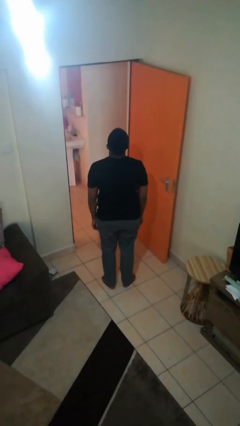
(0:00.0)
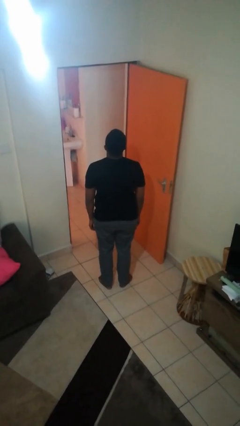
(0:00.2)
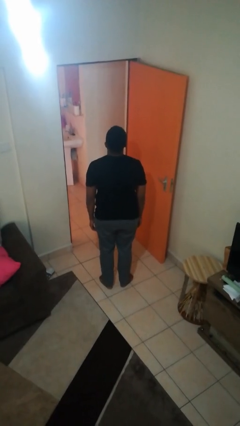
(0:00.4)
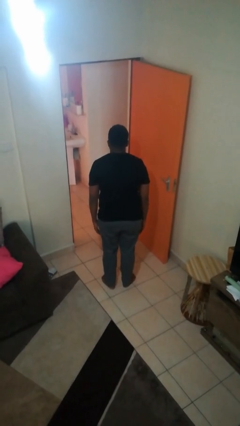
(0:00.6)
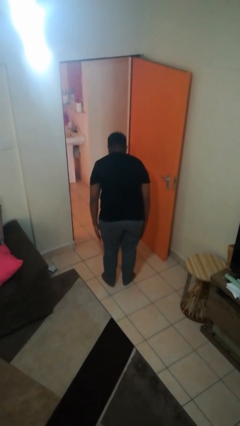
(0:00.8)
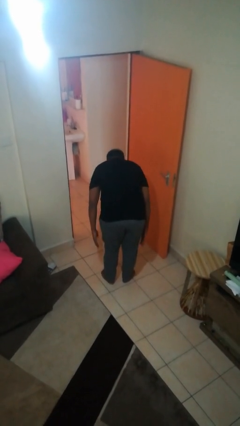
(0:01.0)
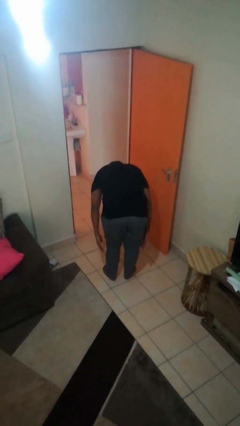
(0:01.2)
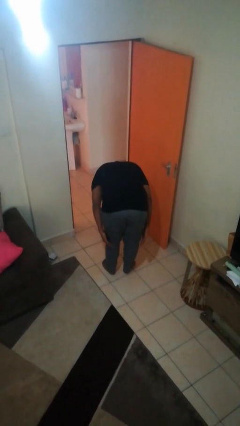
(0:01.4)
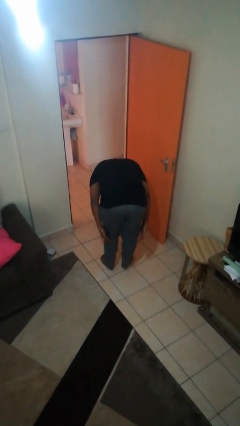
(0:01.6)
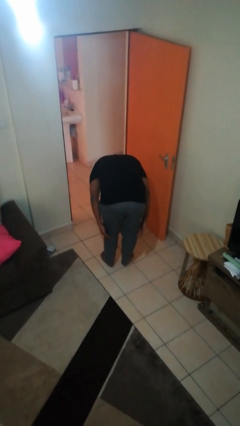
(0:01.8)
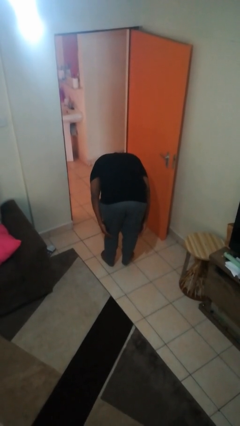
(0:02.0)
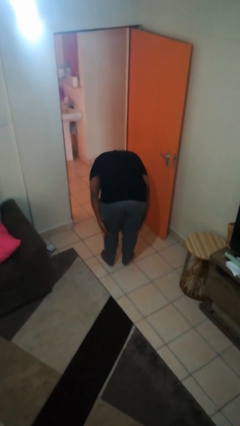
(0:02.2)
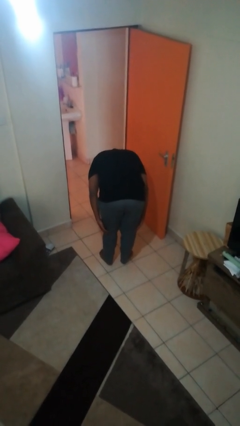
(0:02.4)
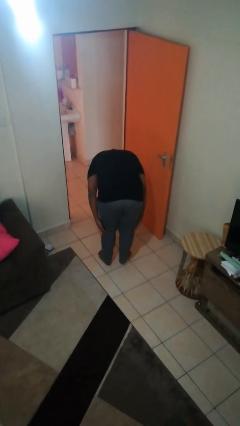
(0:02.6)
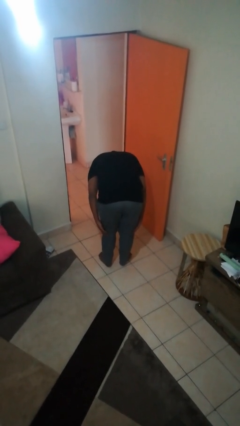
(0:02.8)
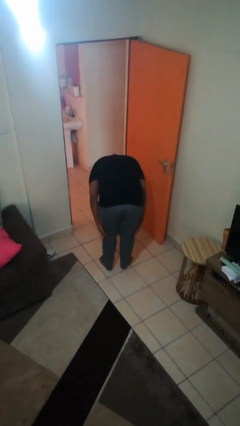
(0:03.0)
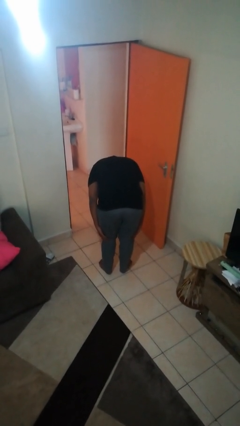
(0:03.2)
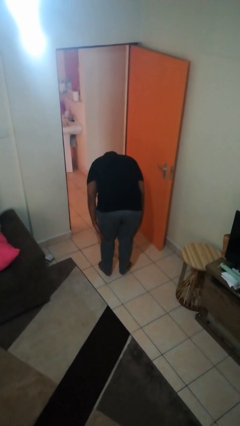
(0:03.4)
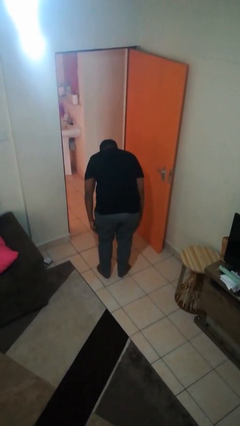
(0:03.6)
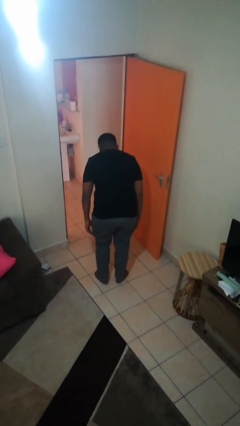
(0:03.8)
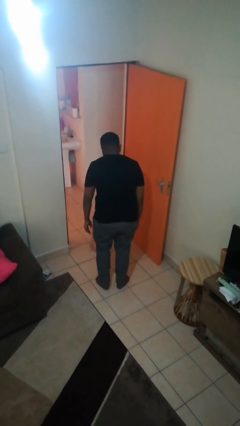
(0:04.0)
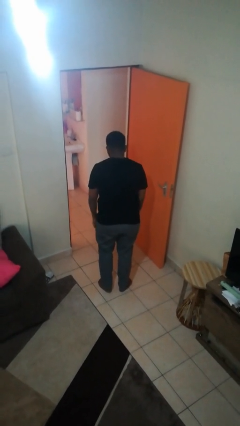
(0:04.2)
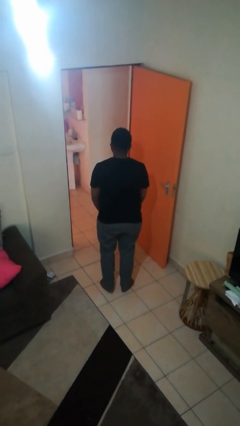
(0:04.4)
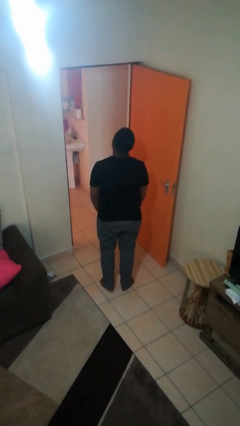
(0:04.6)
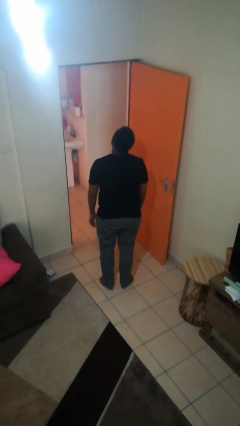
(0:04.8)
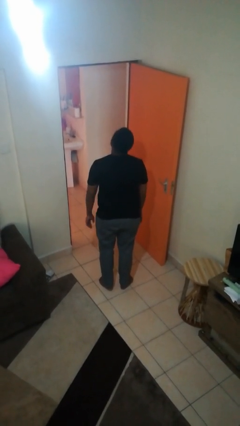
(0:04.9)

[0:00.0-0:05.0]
person bows

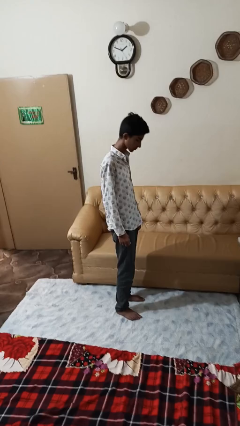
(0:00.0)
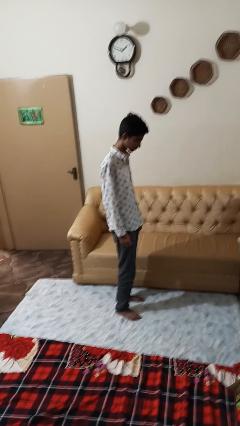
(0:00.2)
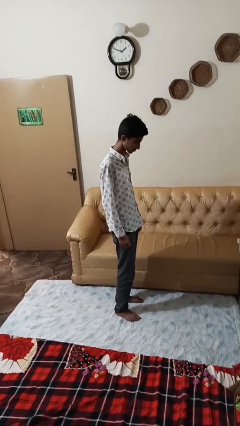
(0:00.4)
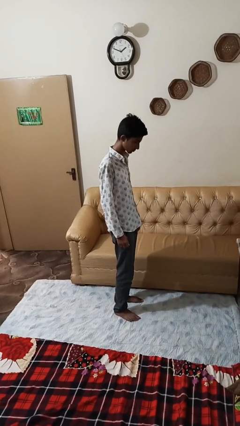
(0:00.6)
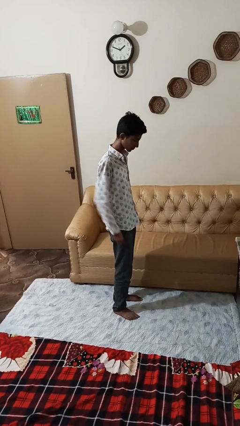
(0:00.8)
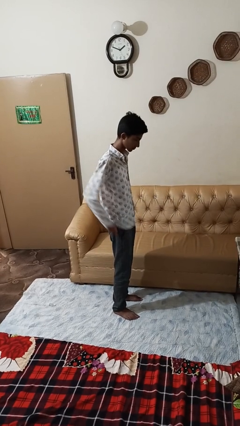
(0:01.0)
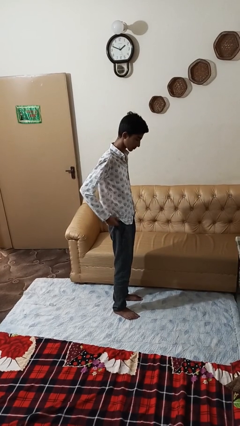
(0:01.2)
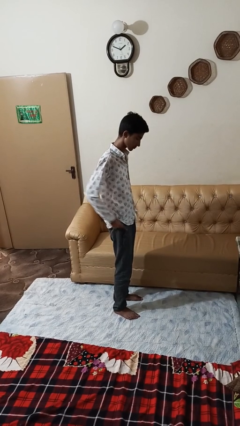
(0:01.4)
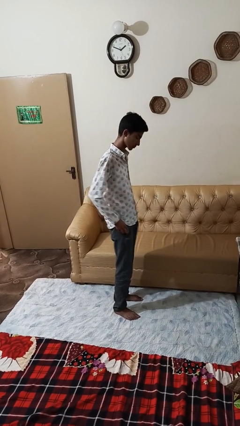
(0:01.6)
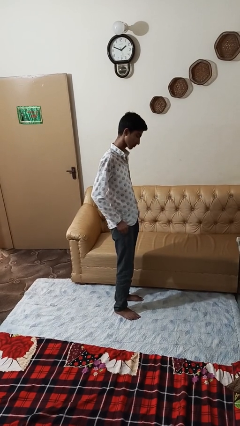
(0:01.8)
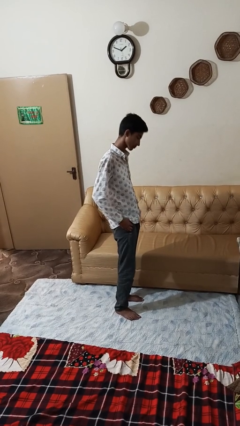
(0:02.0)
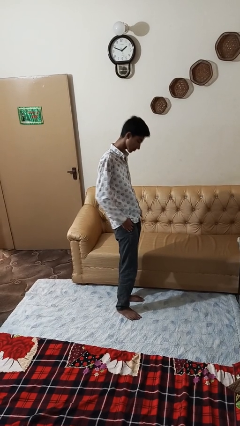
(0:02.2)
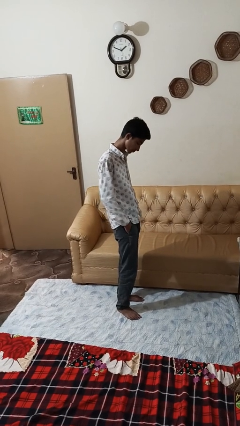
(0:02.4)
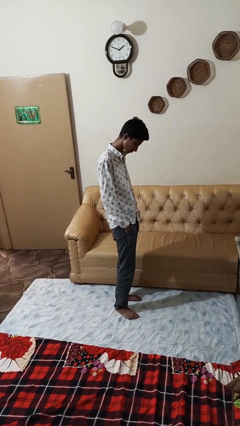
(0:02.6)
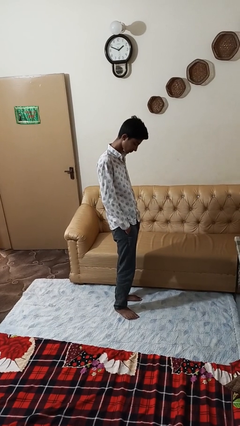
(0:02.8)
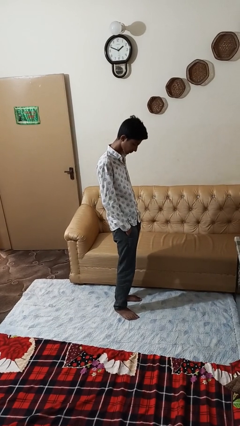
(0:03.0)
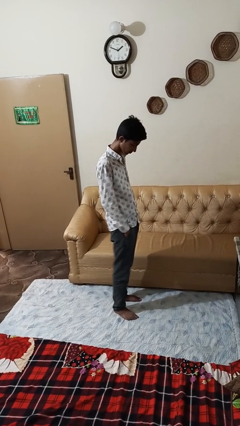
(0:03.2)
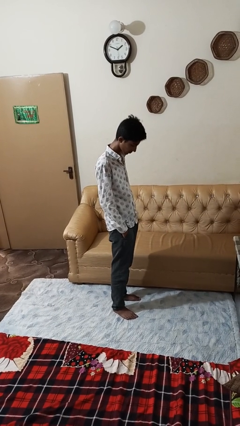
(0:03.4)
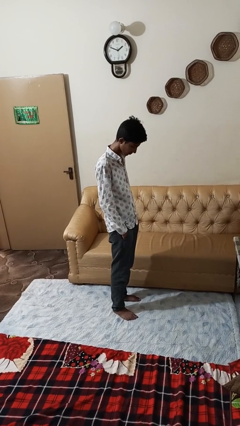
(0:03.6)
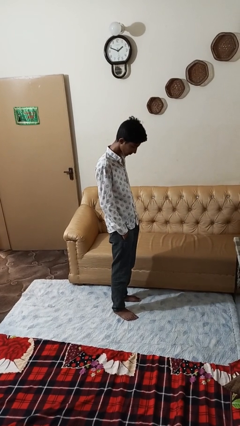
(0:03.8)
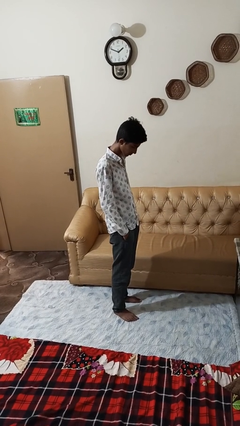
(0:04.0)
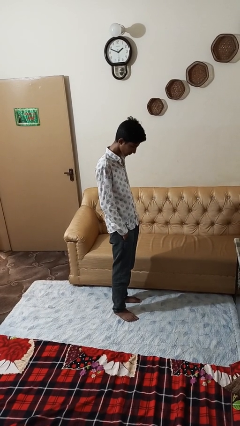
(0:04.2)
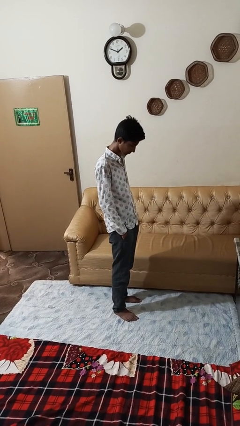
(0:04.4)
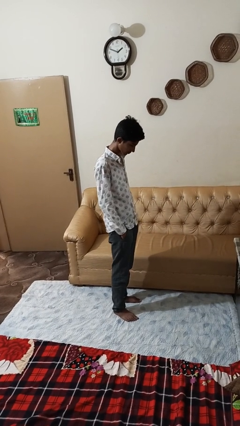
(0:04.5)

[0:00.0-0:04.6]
person puts hands in back pockets

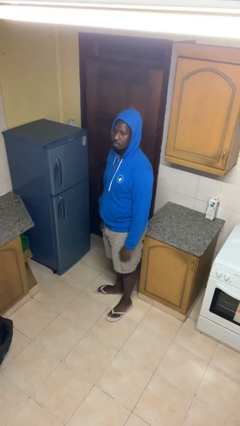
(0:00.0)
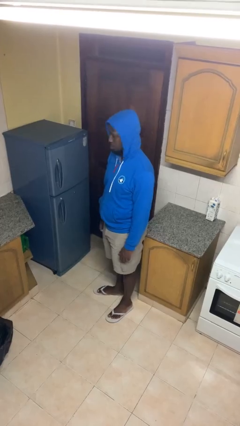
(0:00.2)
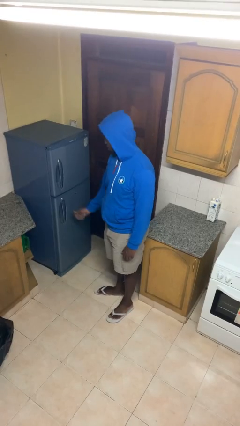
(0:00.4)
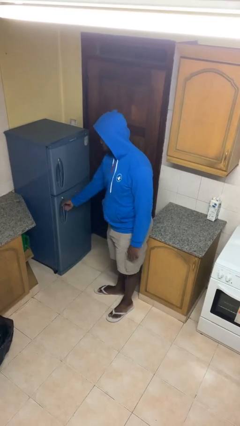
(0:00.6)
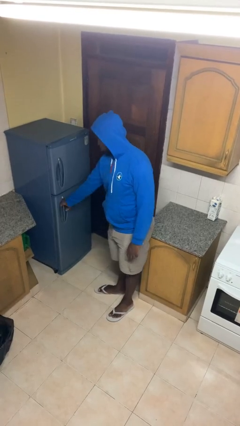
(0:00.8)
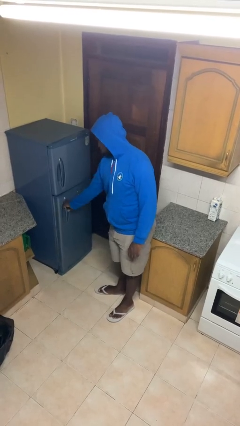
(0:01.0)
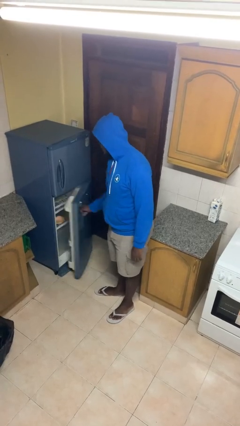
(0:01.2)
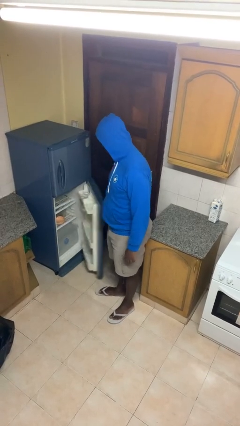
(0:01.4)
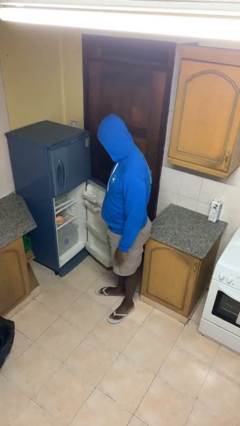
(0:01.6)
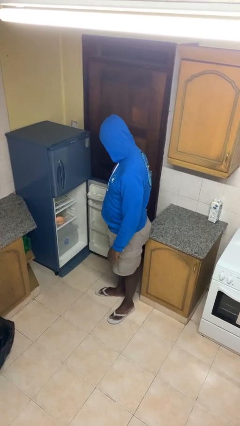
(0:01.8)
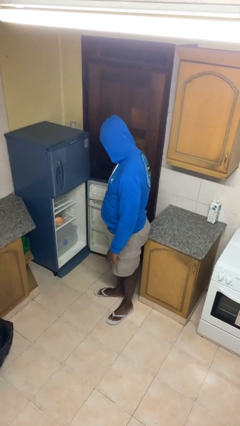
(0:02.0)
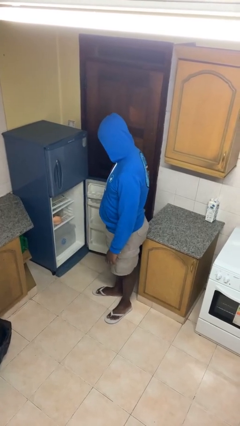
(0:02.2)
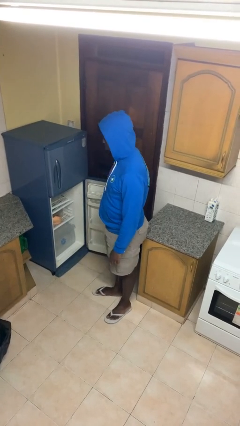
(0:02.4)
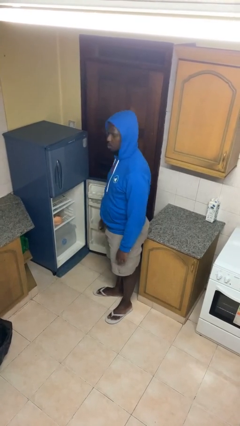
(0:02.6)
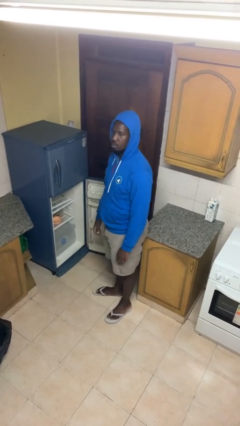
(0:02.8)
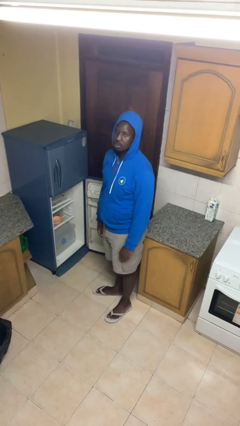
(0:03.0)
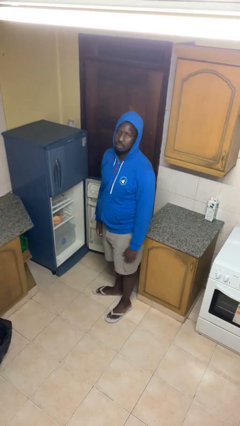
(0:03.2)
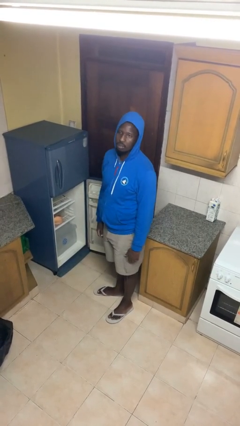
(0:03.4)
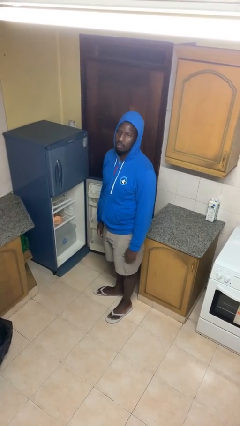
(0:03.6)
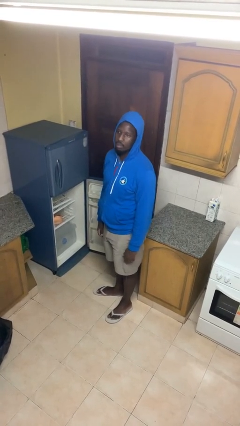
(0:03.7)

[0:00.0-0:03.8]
person opens refrigerator

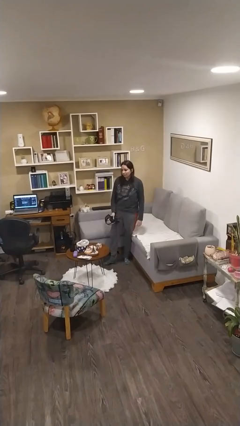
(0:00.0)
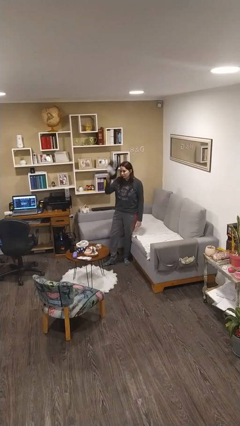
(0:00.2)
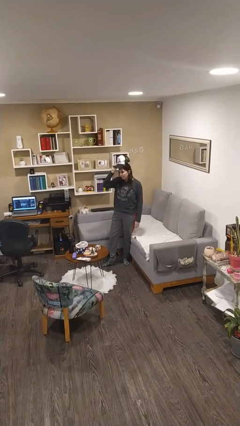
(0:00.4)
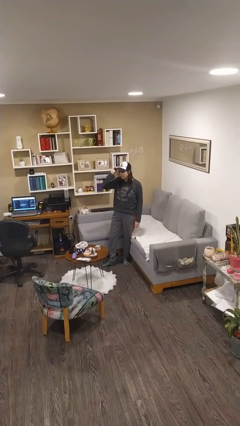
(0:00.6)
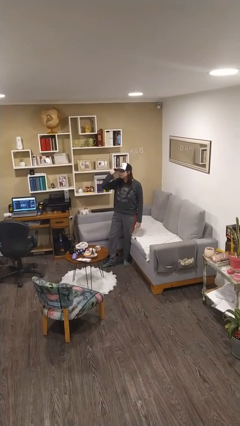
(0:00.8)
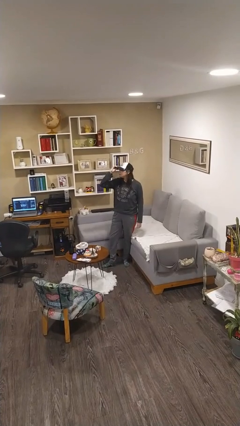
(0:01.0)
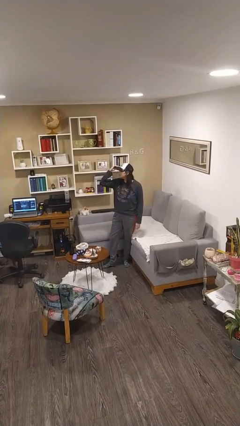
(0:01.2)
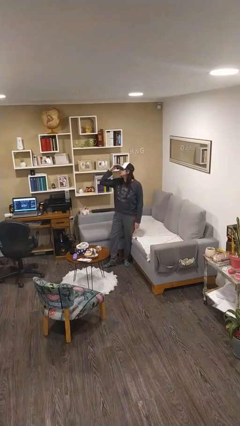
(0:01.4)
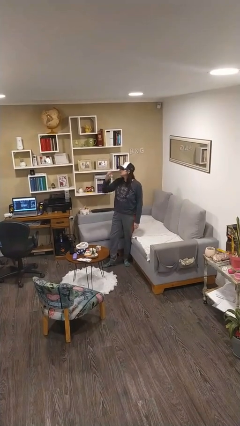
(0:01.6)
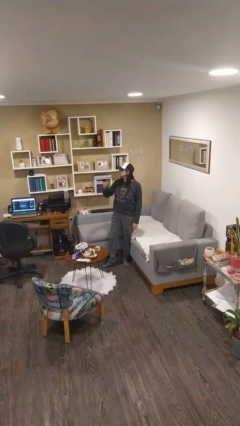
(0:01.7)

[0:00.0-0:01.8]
person puts on hat

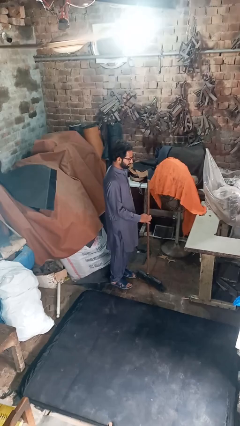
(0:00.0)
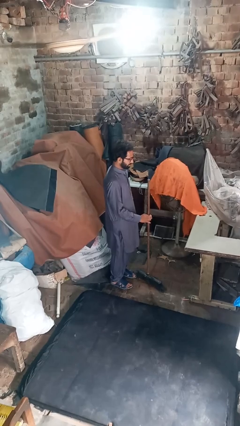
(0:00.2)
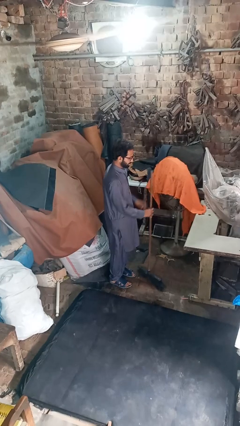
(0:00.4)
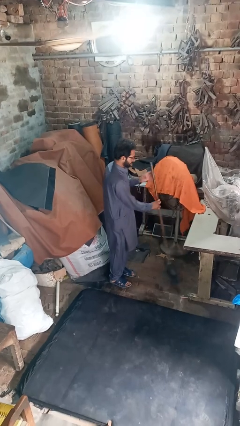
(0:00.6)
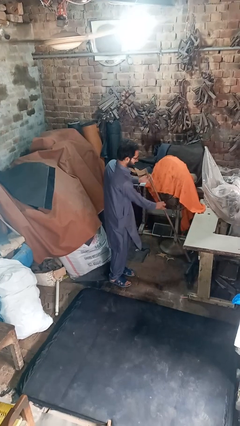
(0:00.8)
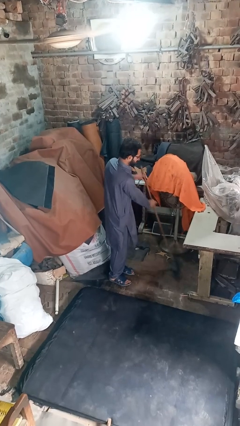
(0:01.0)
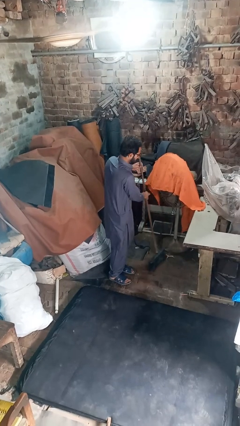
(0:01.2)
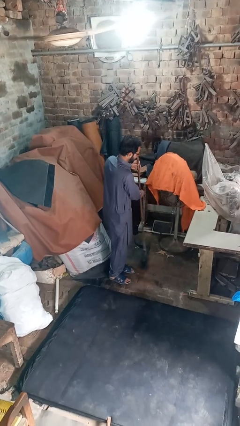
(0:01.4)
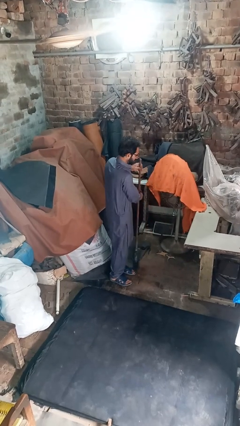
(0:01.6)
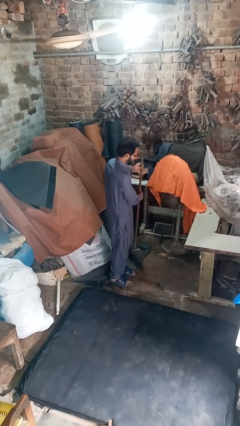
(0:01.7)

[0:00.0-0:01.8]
person sweeps floor

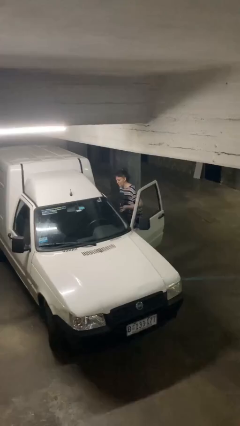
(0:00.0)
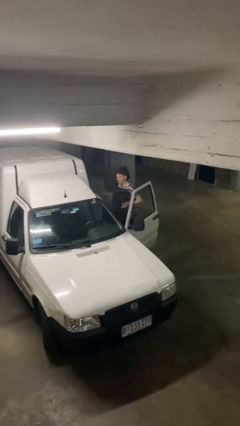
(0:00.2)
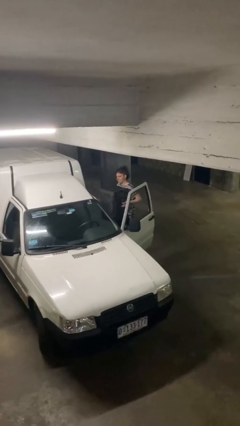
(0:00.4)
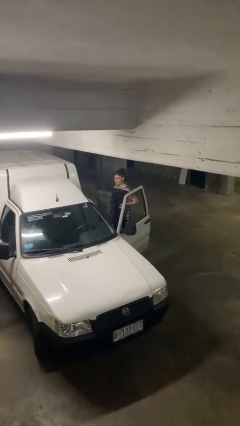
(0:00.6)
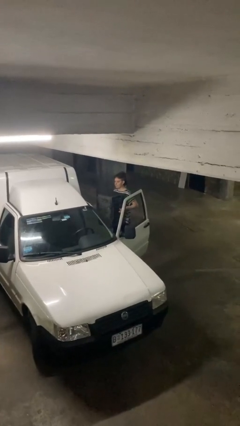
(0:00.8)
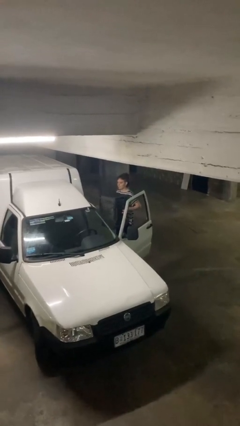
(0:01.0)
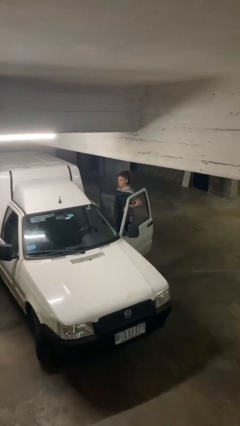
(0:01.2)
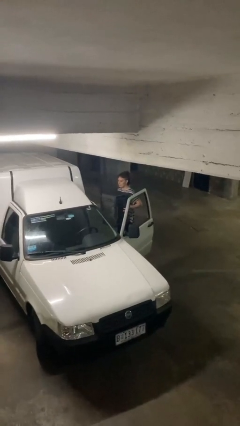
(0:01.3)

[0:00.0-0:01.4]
person unloads car
